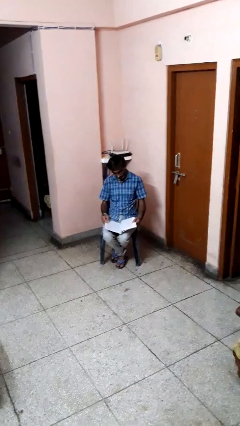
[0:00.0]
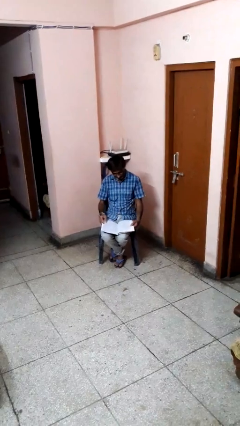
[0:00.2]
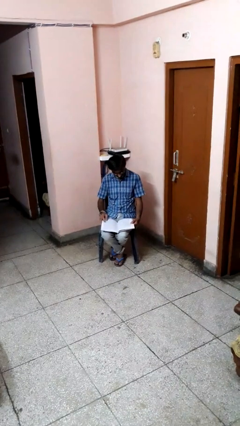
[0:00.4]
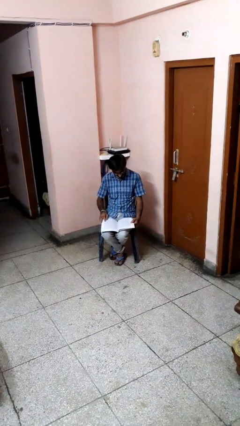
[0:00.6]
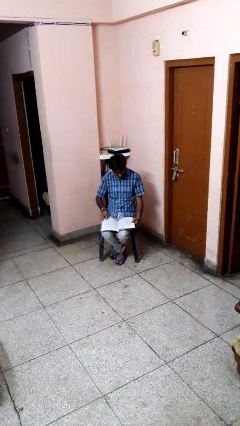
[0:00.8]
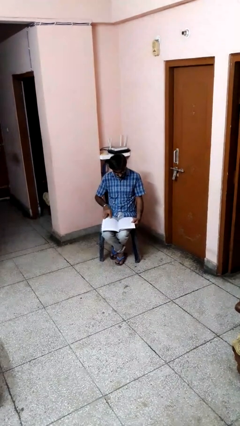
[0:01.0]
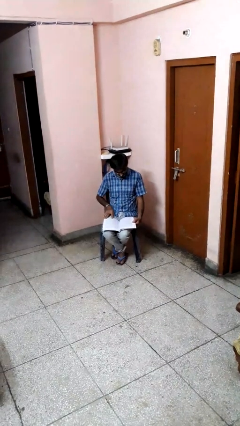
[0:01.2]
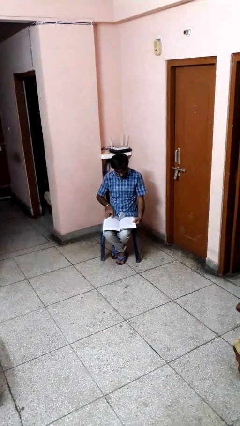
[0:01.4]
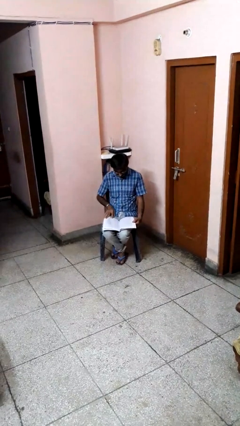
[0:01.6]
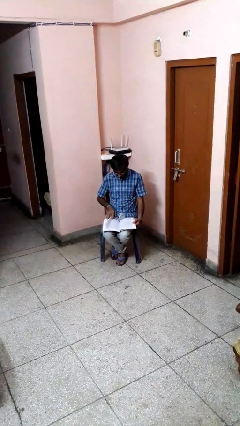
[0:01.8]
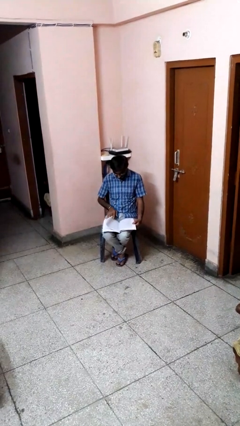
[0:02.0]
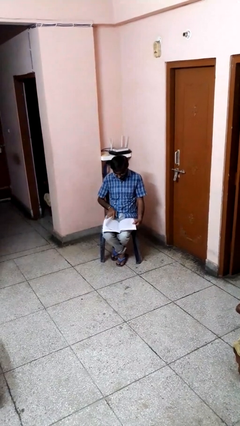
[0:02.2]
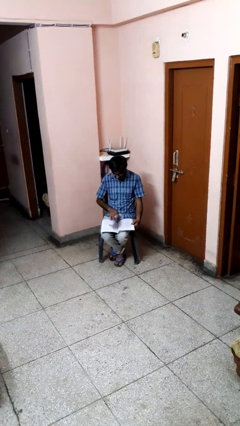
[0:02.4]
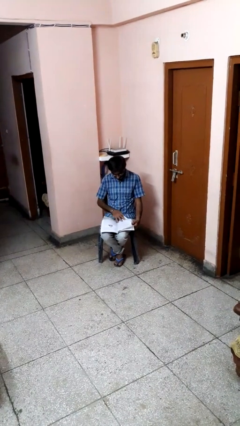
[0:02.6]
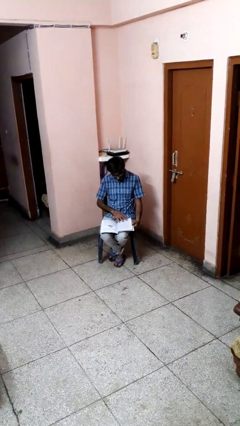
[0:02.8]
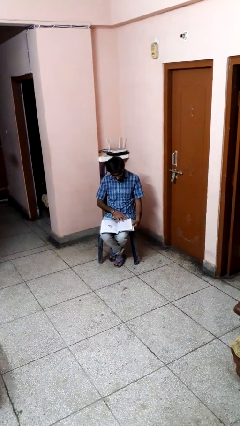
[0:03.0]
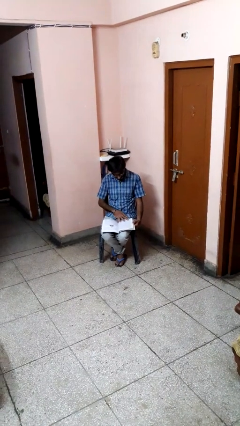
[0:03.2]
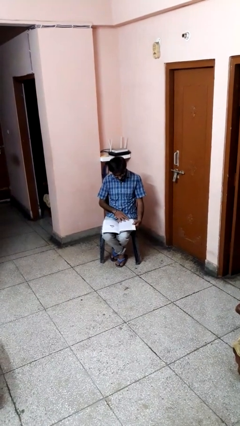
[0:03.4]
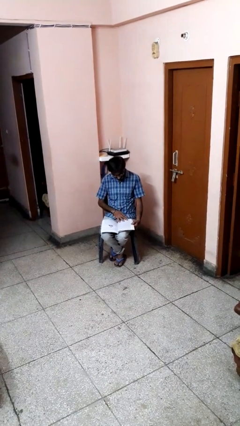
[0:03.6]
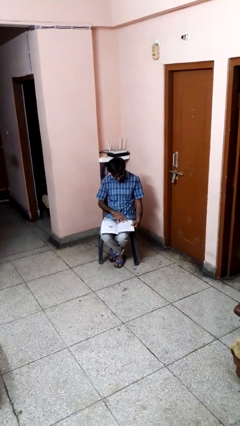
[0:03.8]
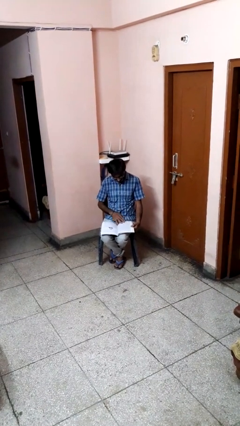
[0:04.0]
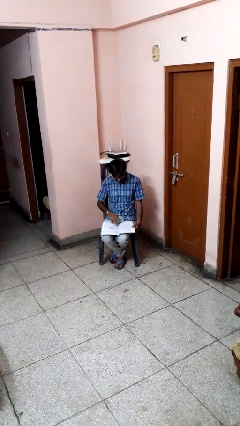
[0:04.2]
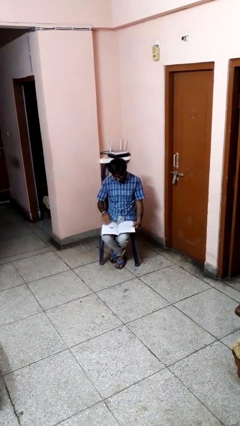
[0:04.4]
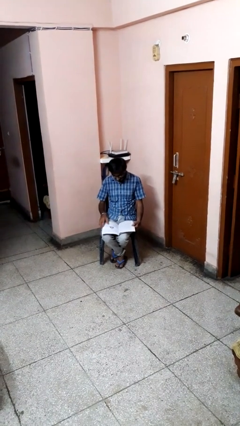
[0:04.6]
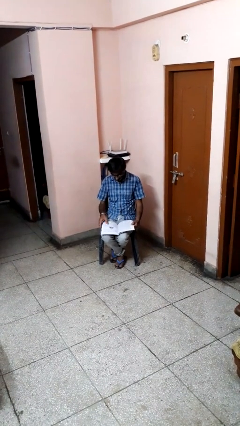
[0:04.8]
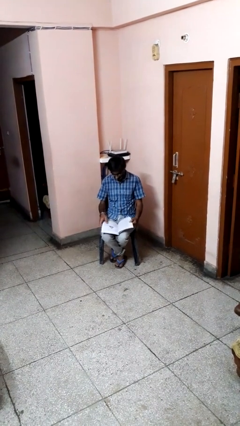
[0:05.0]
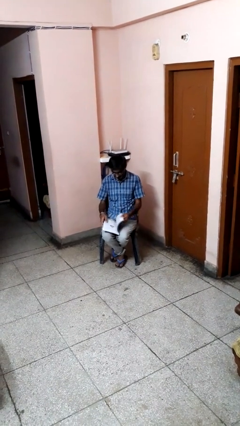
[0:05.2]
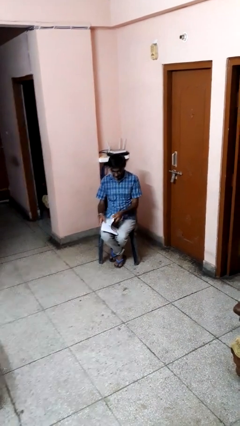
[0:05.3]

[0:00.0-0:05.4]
person reads book

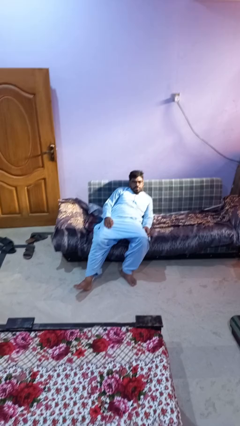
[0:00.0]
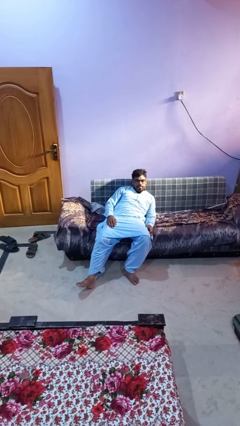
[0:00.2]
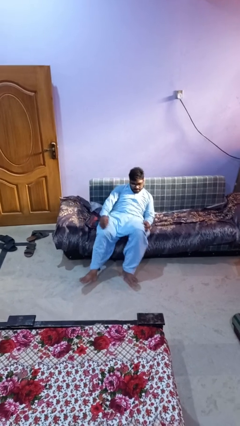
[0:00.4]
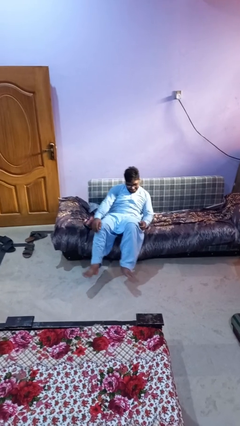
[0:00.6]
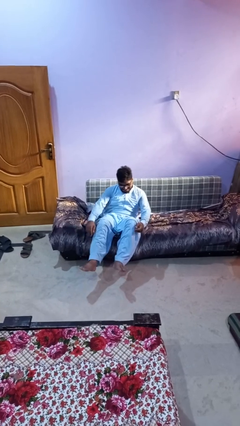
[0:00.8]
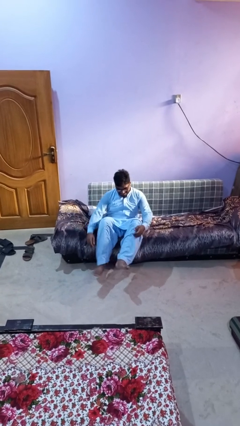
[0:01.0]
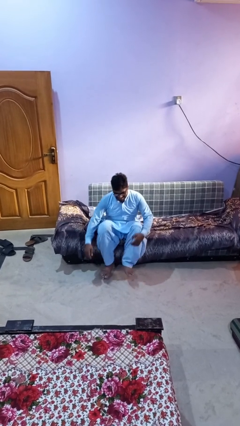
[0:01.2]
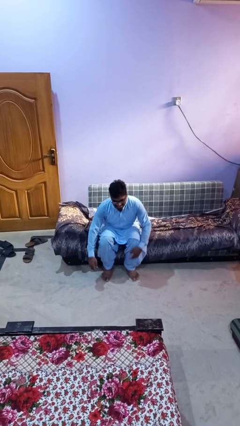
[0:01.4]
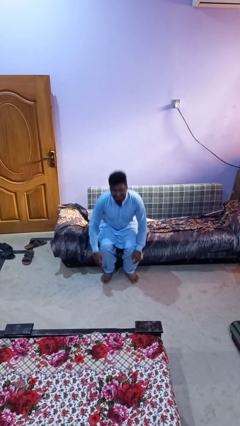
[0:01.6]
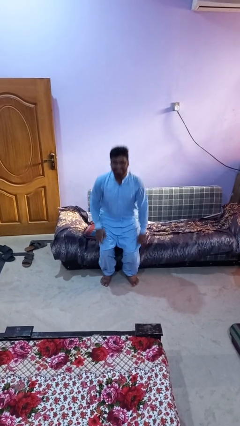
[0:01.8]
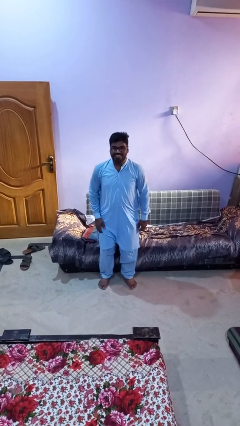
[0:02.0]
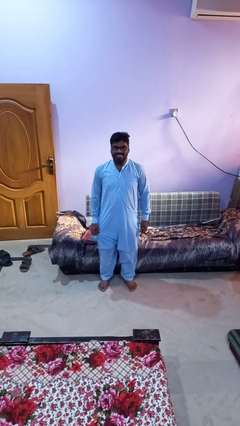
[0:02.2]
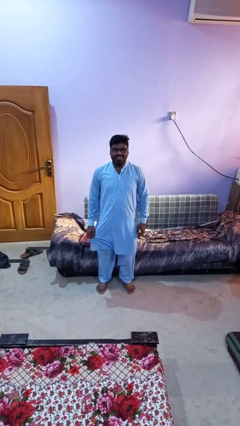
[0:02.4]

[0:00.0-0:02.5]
person stands up

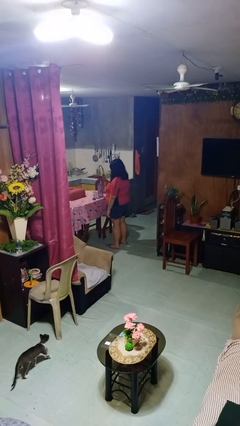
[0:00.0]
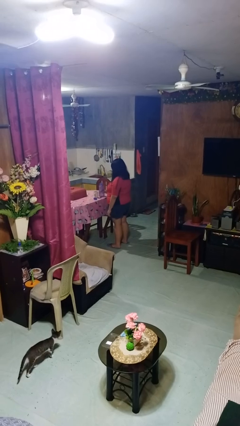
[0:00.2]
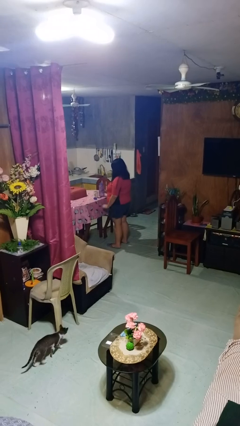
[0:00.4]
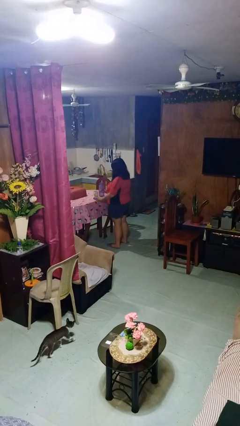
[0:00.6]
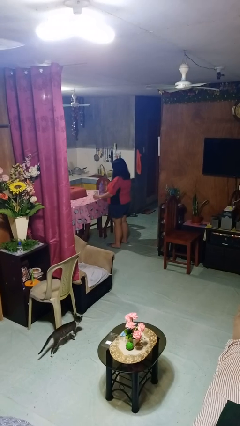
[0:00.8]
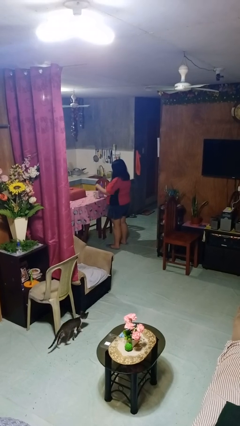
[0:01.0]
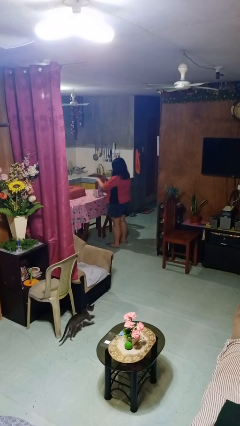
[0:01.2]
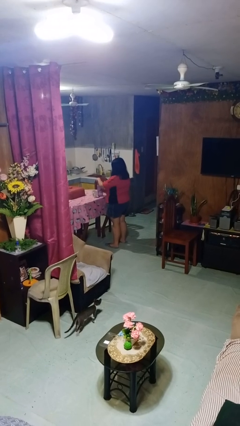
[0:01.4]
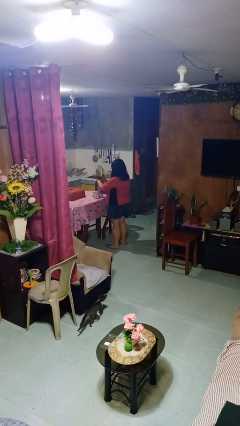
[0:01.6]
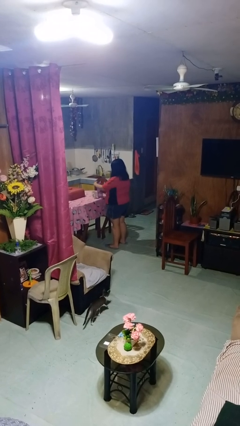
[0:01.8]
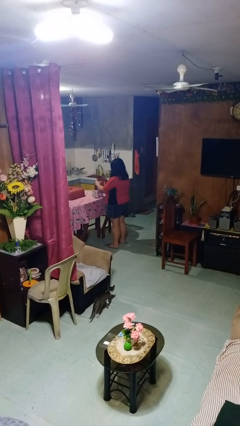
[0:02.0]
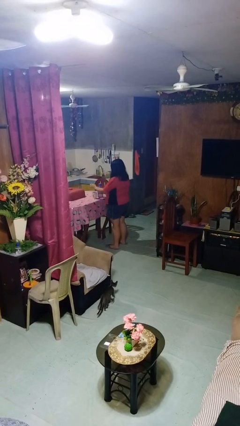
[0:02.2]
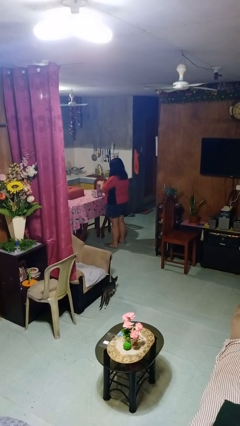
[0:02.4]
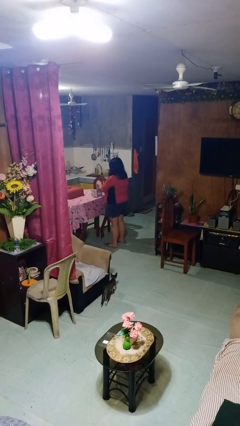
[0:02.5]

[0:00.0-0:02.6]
person screws lid to bottle

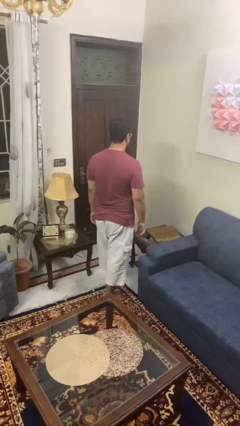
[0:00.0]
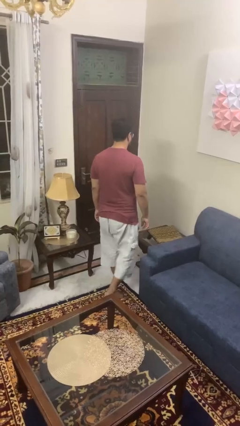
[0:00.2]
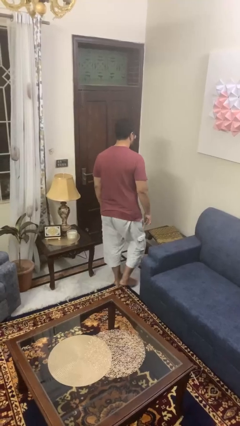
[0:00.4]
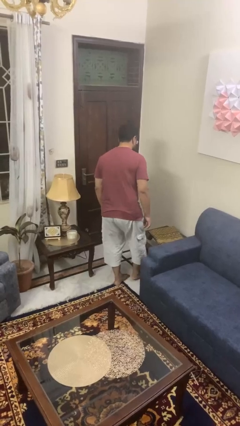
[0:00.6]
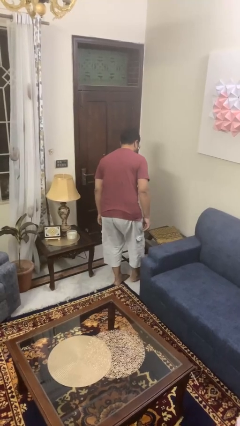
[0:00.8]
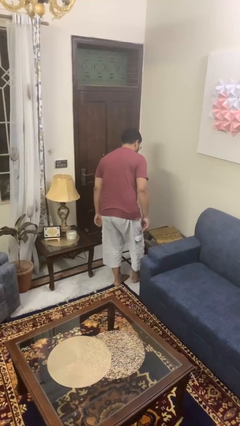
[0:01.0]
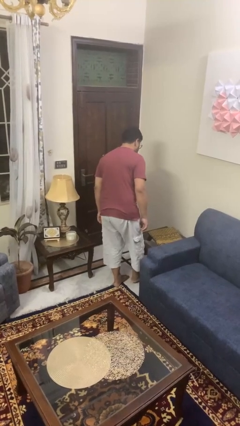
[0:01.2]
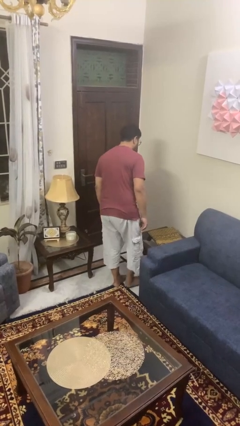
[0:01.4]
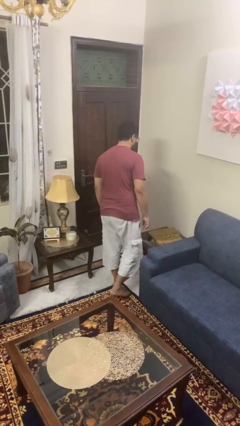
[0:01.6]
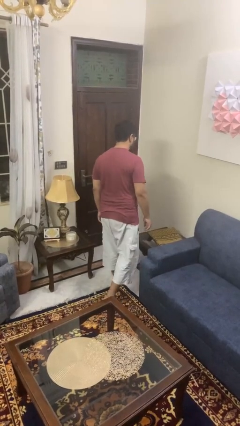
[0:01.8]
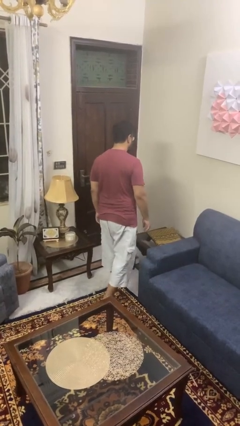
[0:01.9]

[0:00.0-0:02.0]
person bumps into table

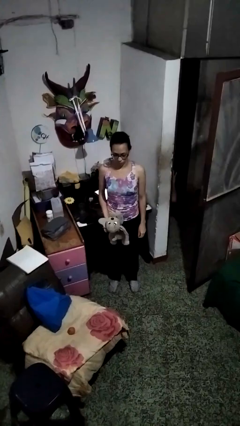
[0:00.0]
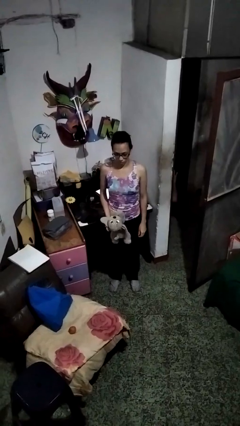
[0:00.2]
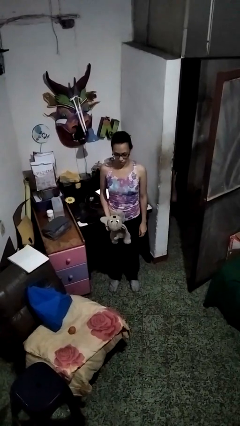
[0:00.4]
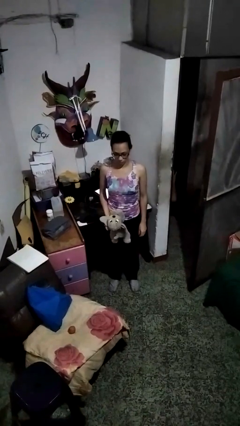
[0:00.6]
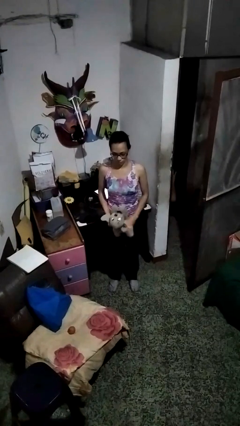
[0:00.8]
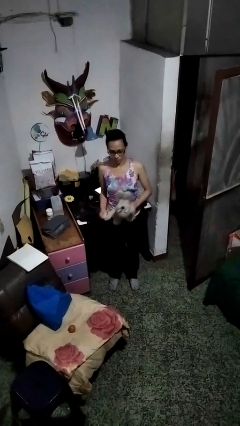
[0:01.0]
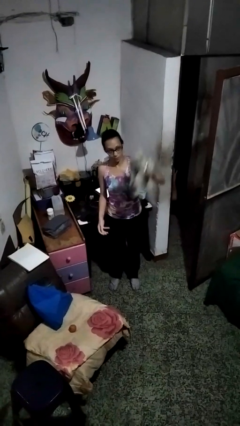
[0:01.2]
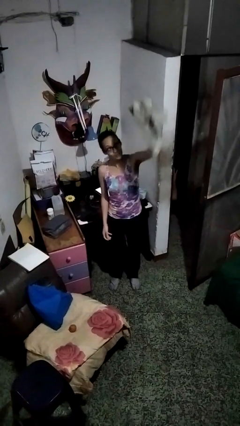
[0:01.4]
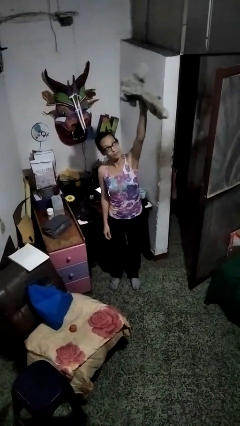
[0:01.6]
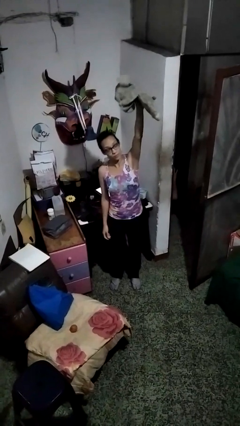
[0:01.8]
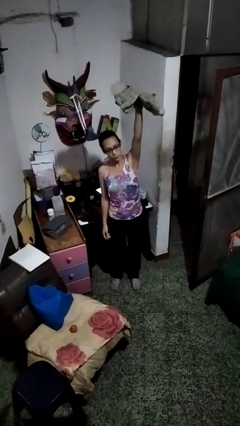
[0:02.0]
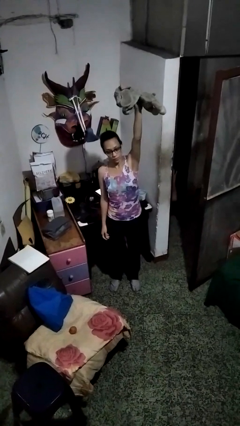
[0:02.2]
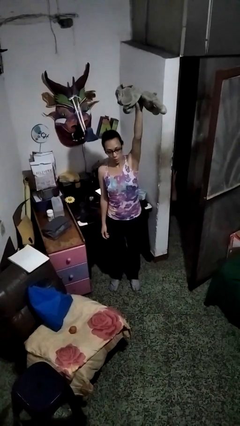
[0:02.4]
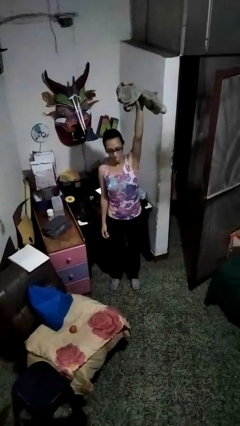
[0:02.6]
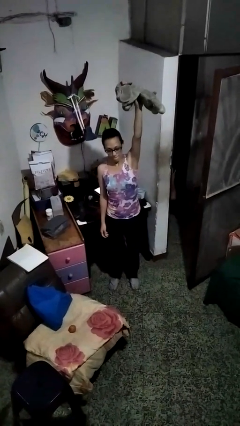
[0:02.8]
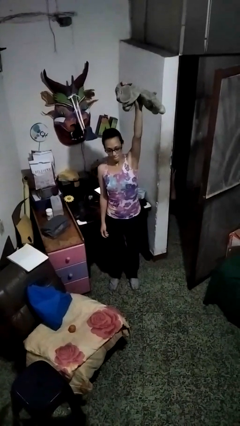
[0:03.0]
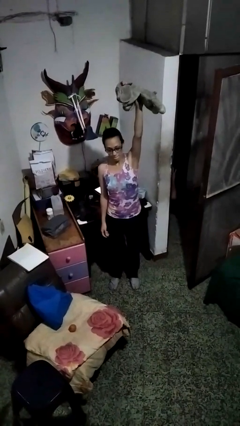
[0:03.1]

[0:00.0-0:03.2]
person drops object

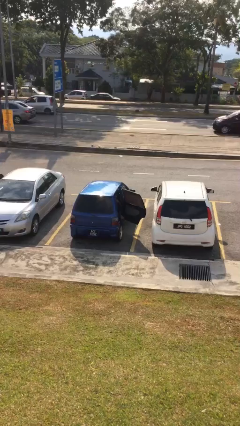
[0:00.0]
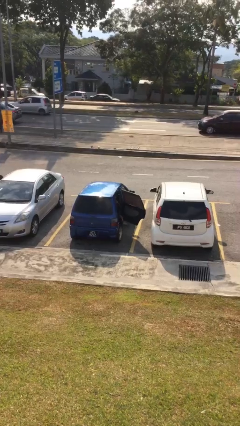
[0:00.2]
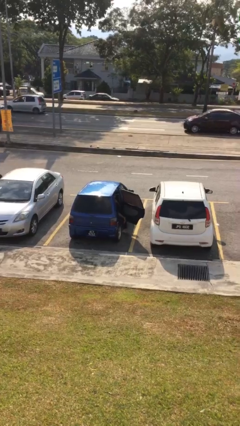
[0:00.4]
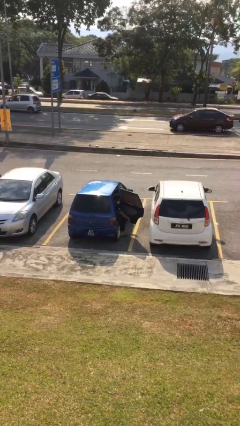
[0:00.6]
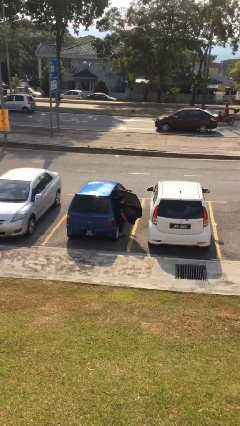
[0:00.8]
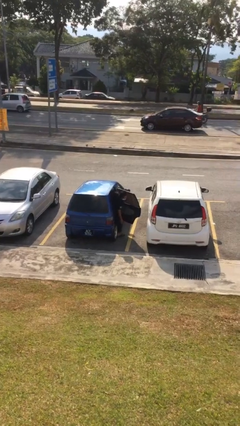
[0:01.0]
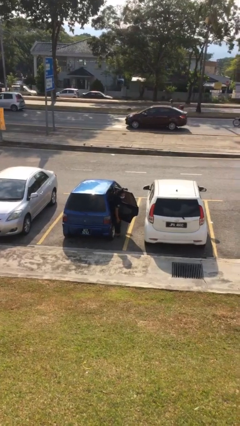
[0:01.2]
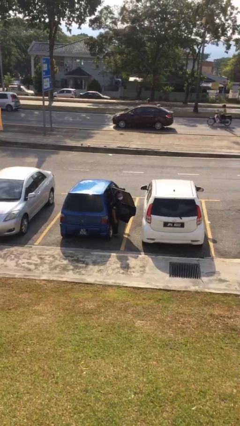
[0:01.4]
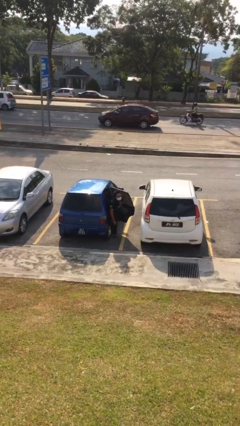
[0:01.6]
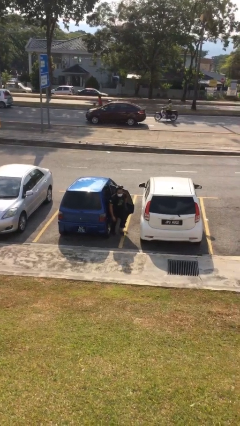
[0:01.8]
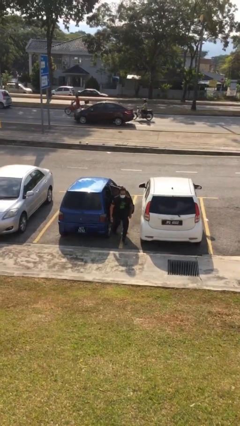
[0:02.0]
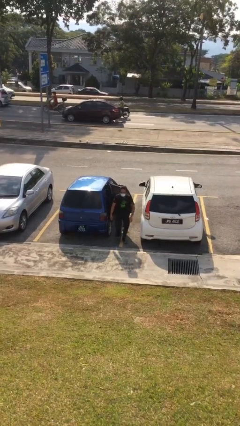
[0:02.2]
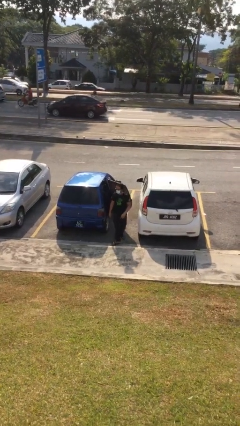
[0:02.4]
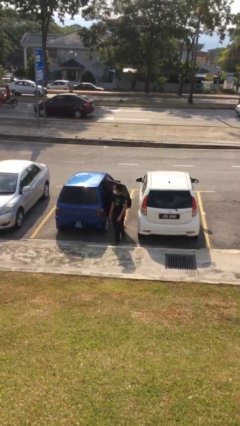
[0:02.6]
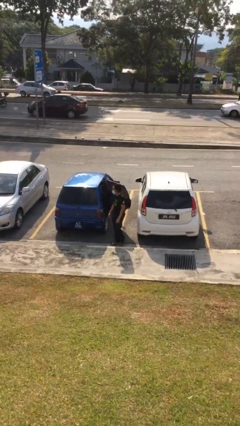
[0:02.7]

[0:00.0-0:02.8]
person exits car
